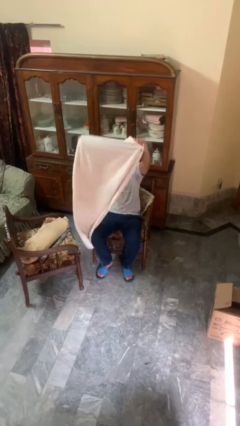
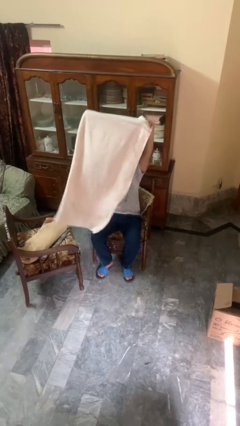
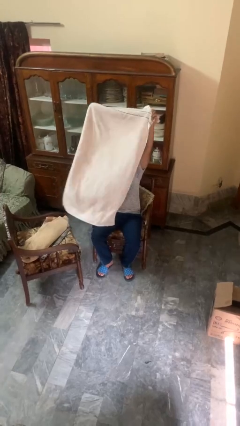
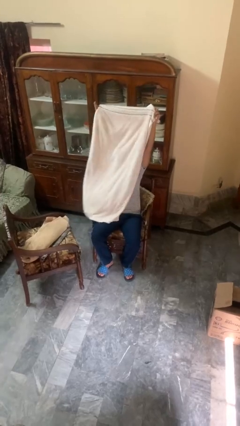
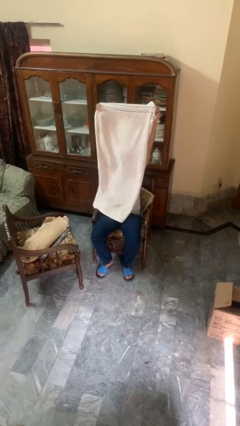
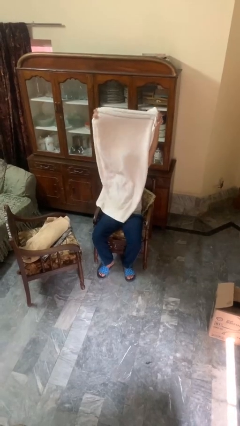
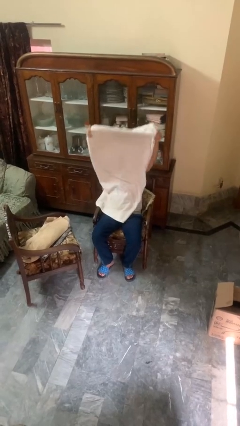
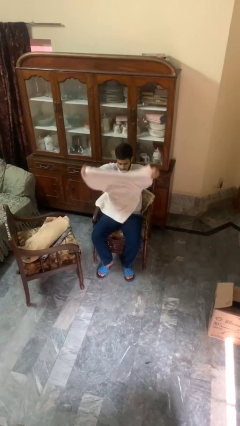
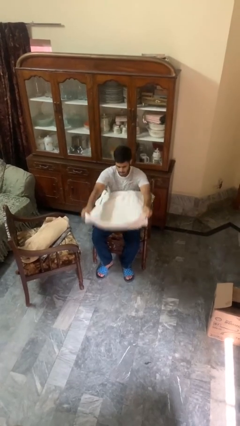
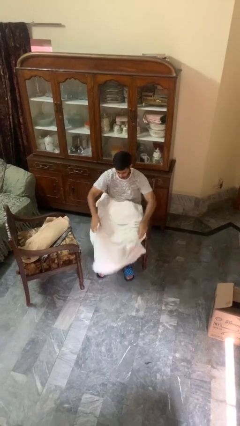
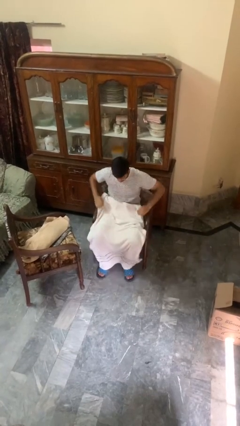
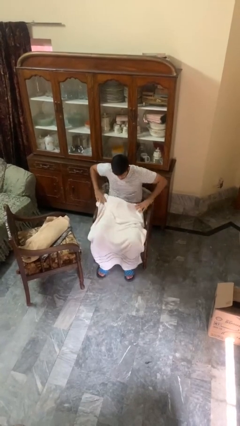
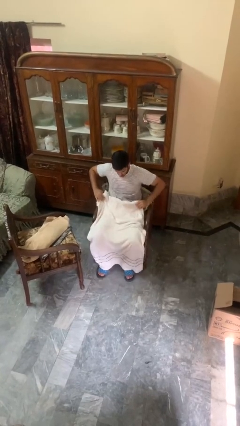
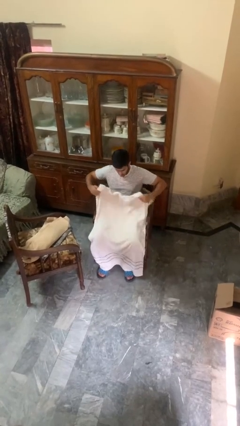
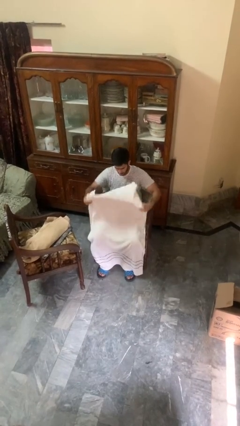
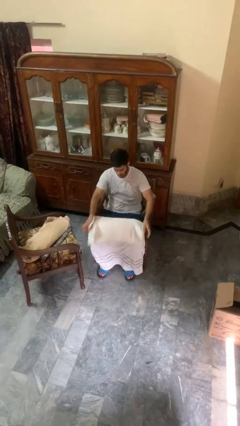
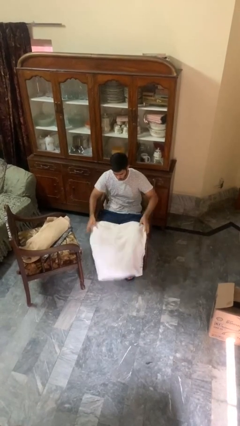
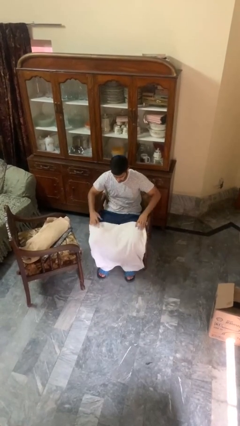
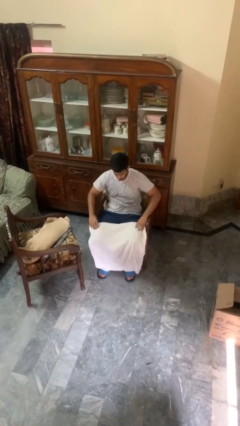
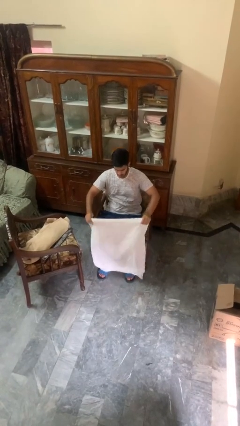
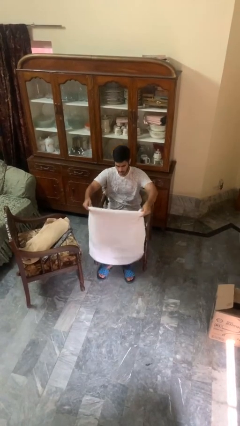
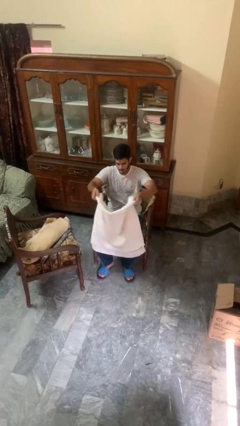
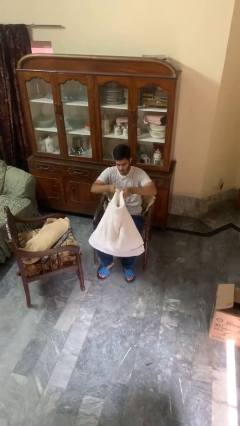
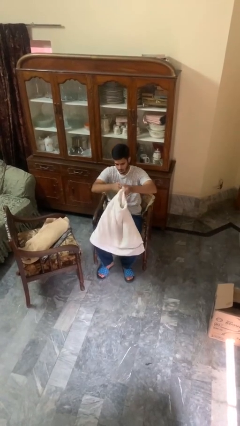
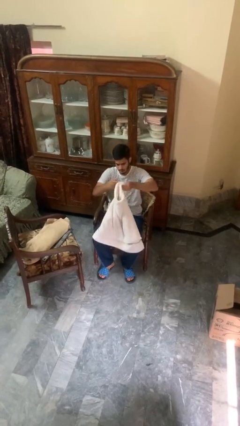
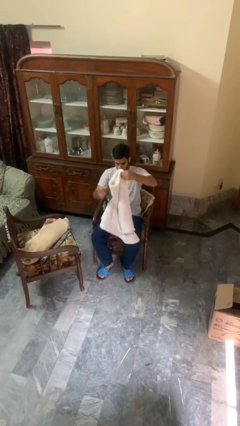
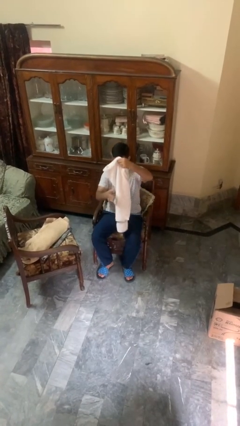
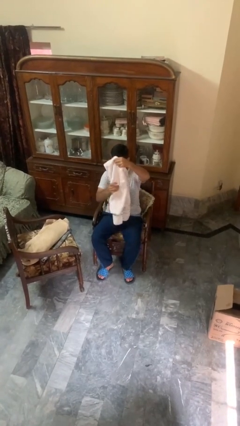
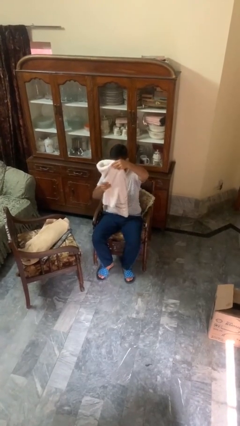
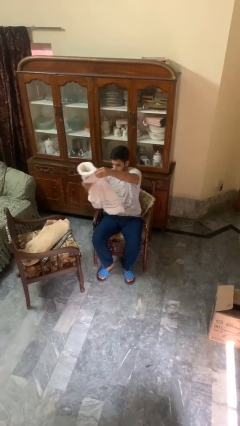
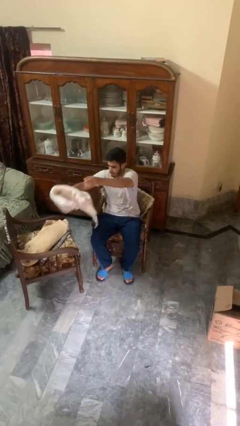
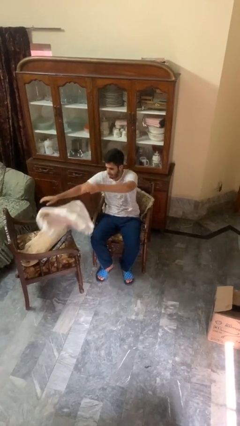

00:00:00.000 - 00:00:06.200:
person folds towel

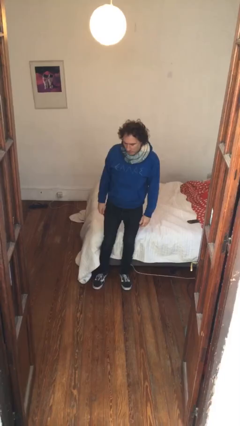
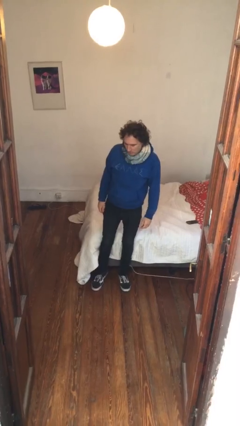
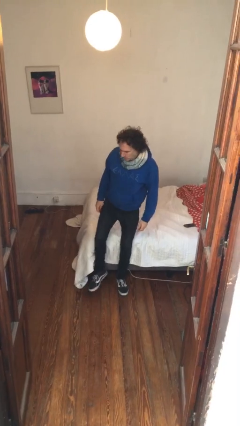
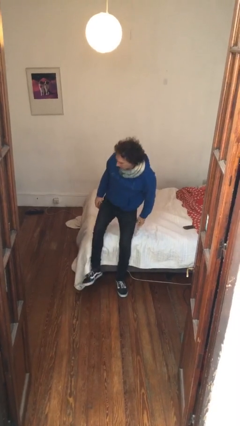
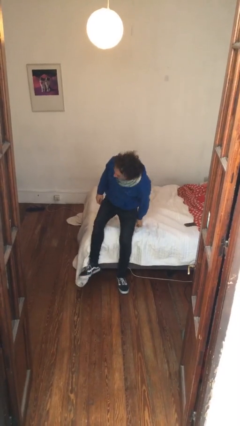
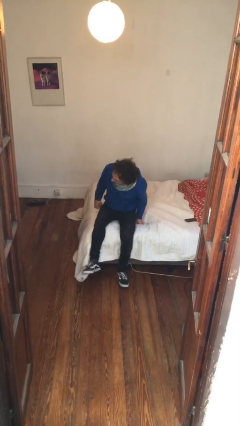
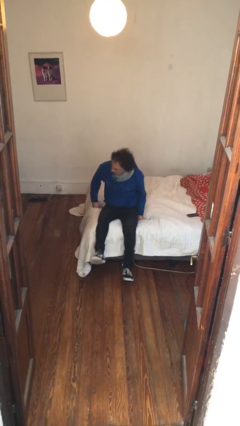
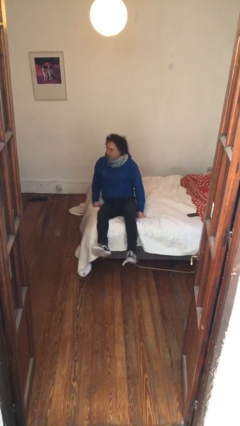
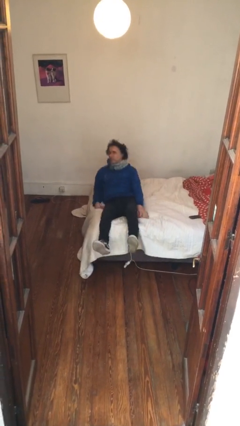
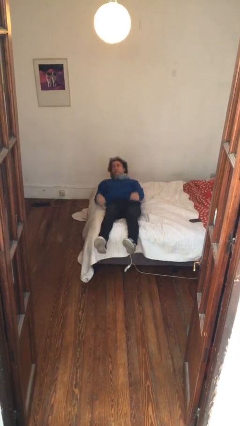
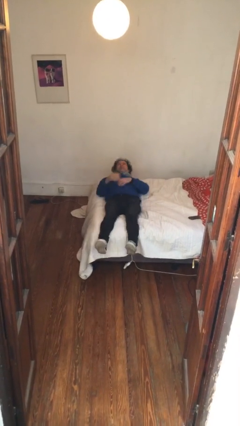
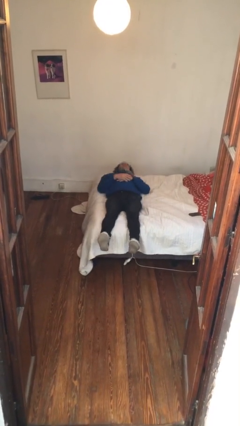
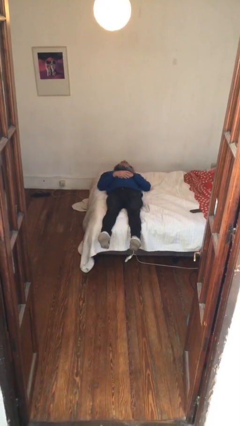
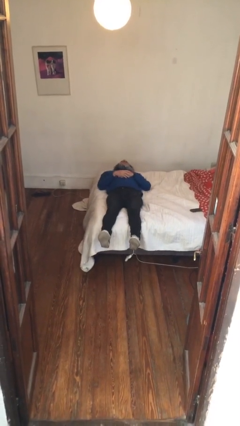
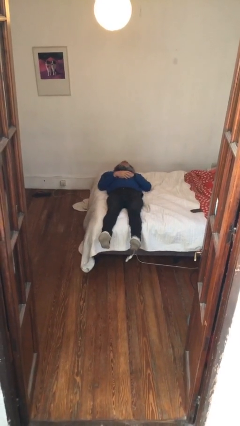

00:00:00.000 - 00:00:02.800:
person lies down on bed

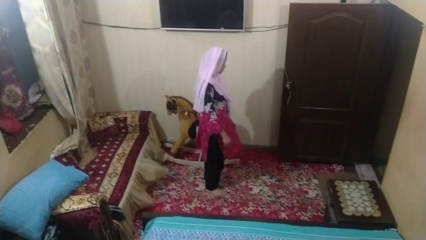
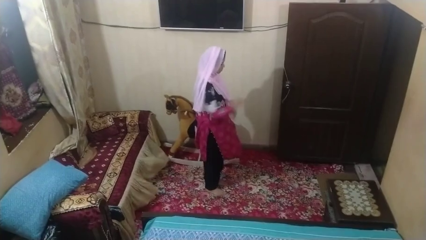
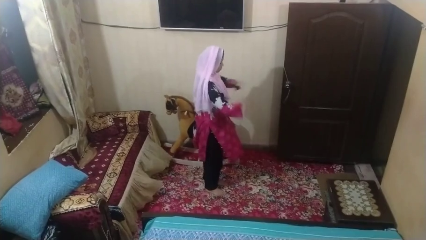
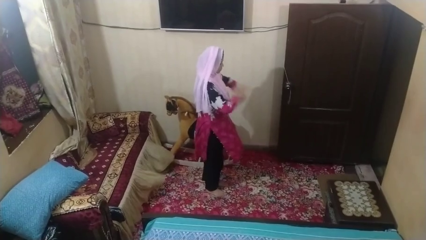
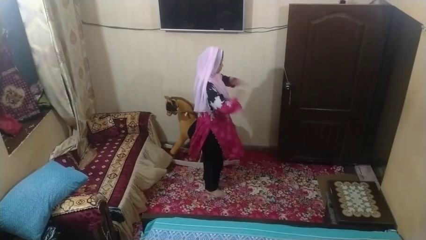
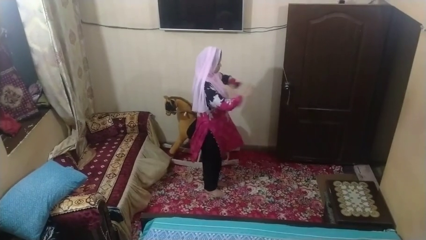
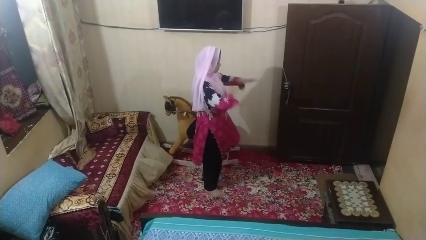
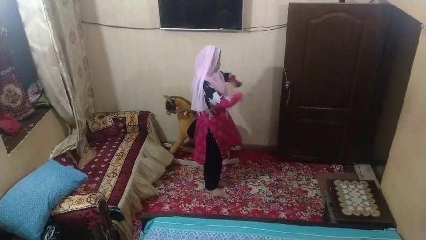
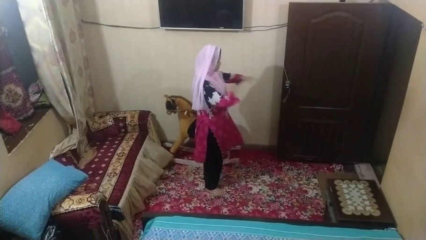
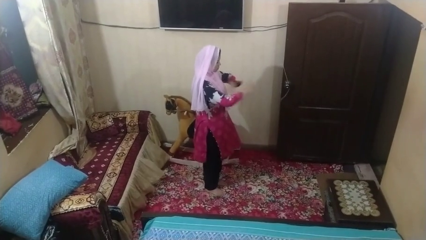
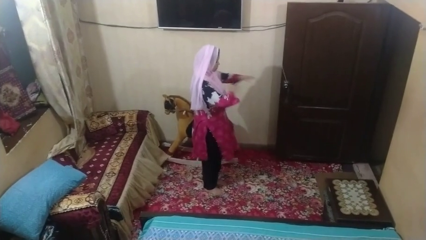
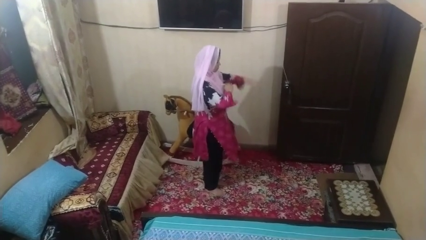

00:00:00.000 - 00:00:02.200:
person karate chop

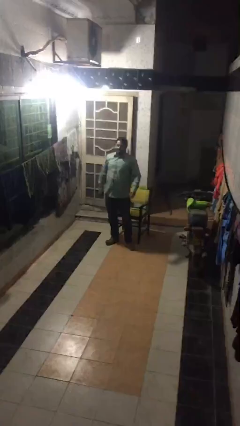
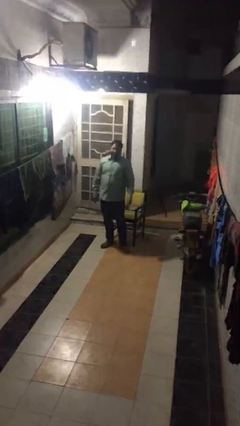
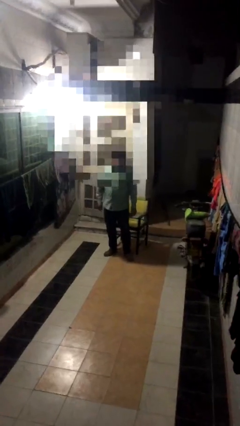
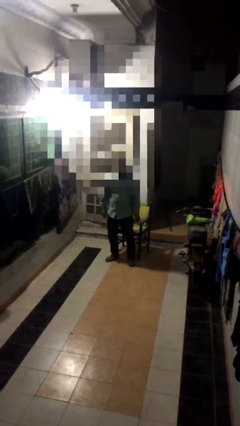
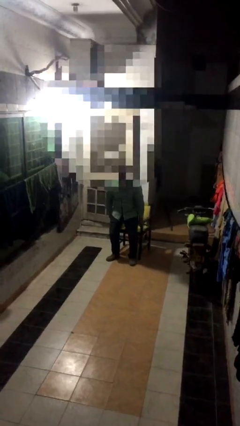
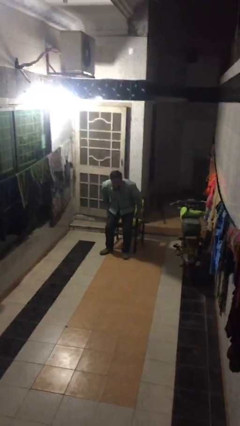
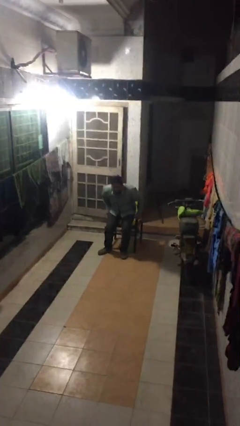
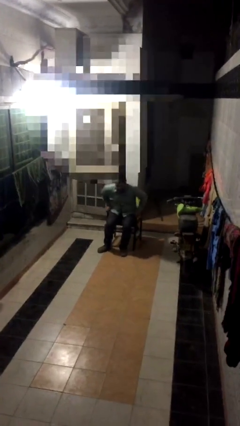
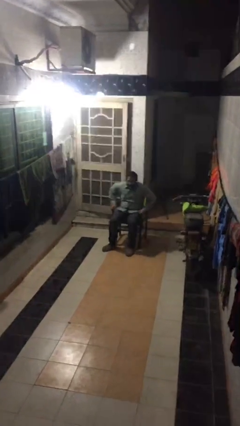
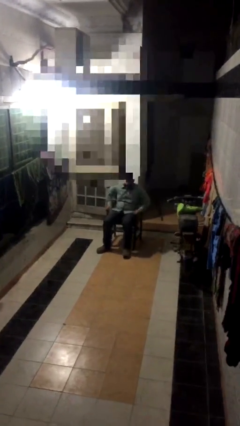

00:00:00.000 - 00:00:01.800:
person sits down

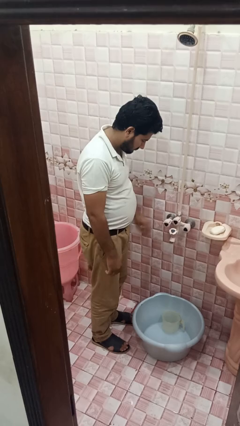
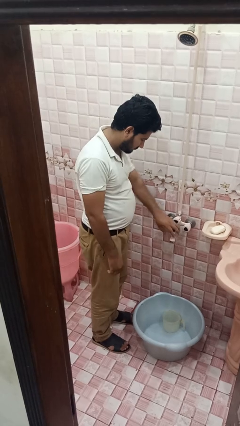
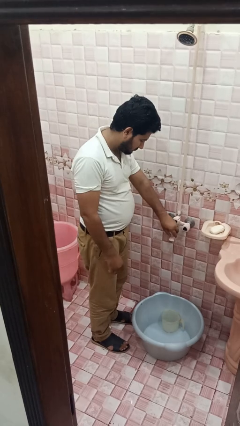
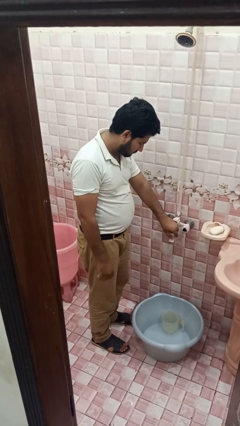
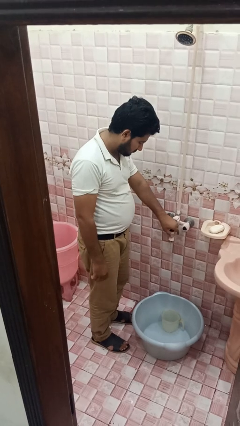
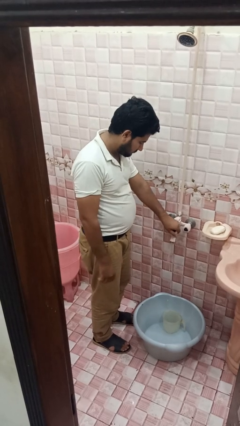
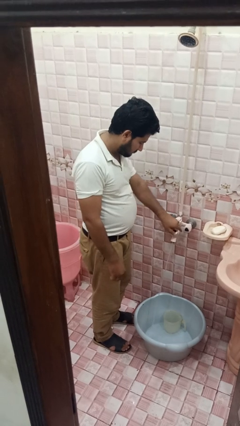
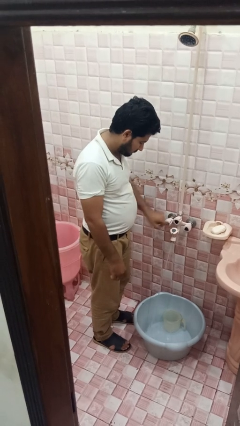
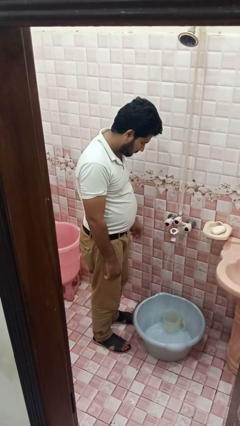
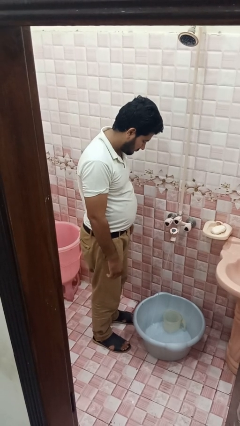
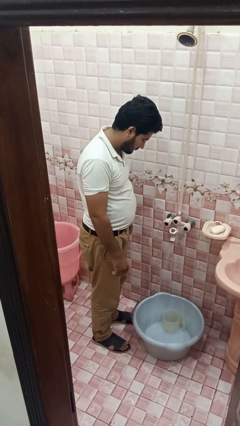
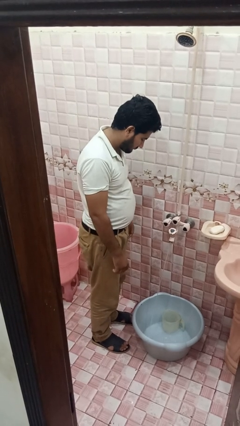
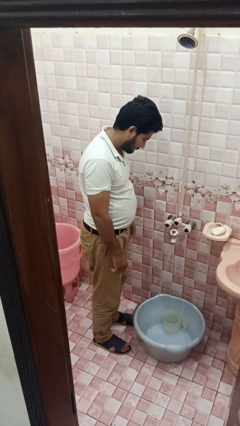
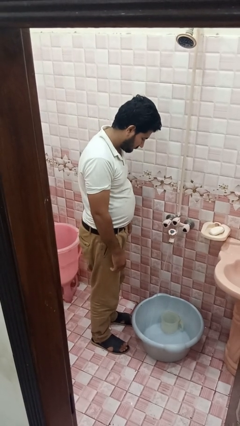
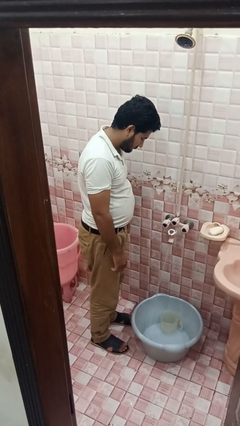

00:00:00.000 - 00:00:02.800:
person turns on faucet

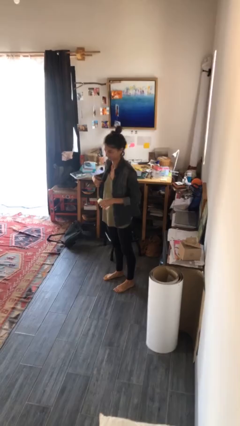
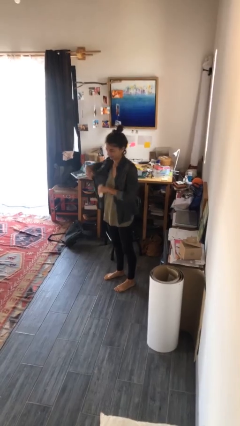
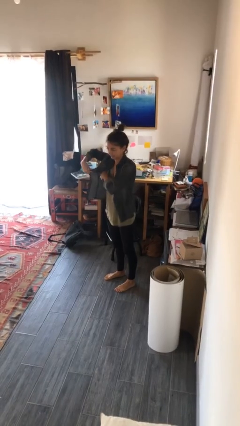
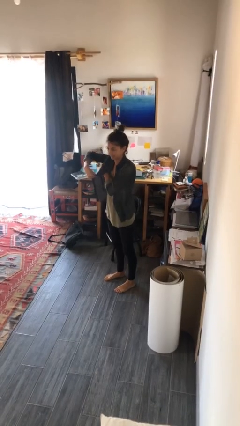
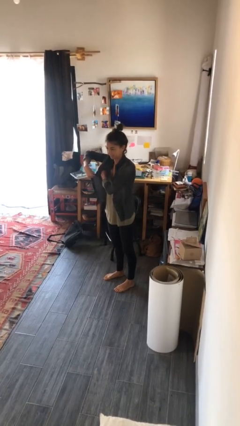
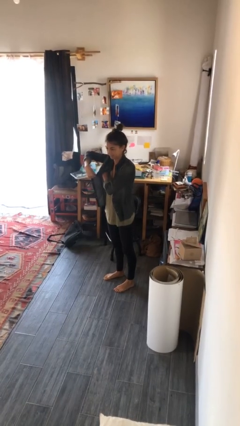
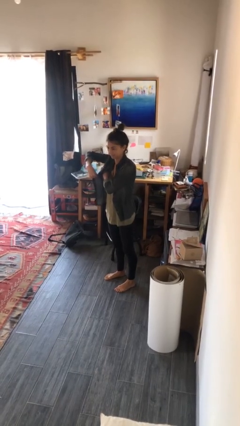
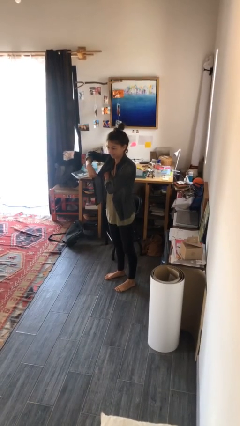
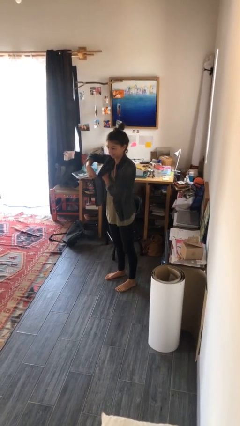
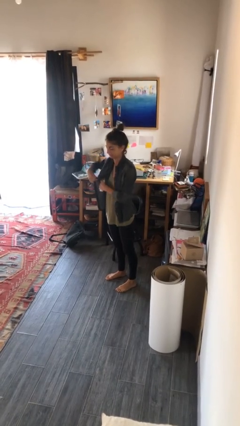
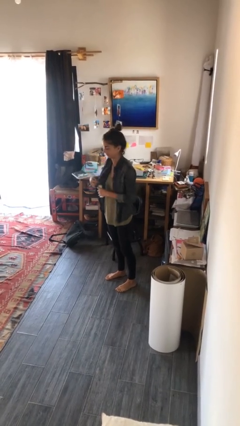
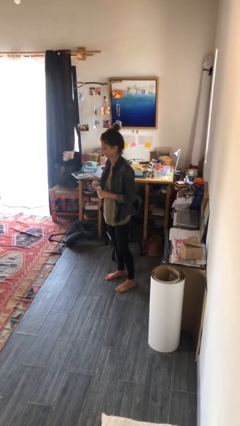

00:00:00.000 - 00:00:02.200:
person applies deodorant
